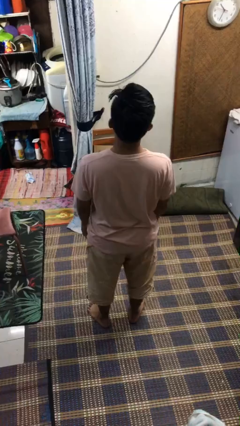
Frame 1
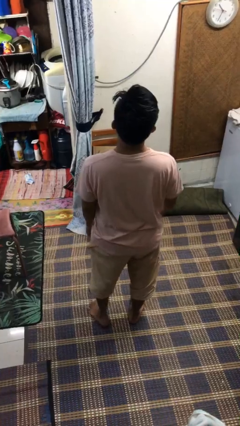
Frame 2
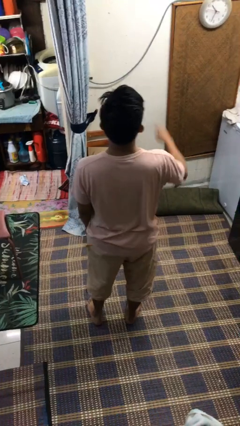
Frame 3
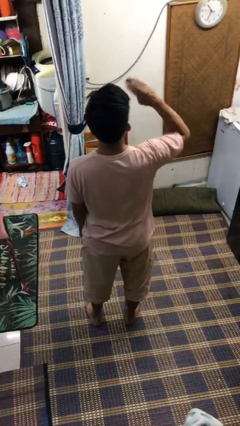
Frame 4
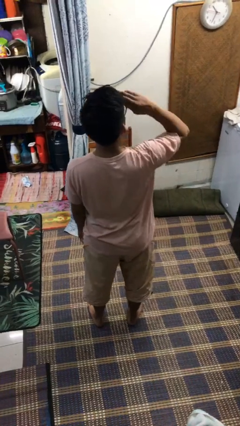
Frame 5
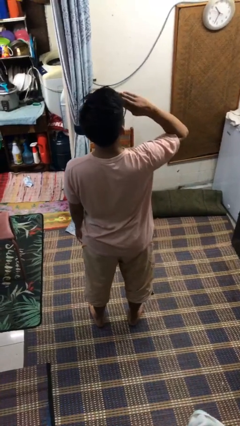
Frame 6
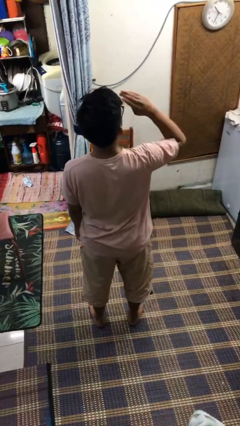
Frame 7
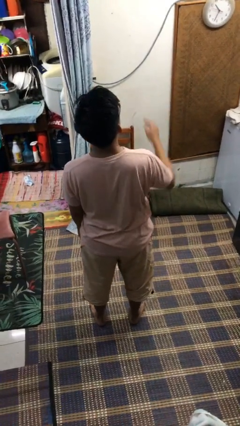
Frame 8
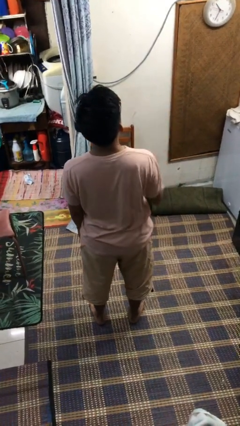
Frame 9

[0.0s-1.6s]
person salutes

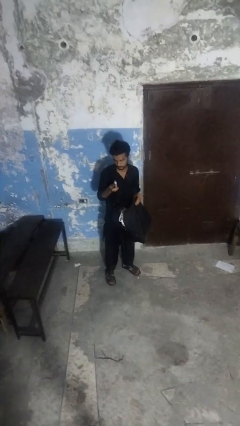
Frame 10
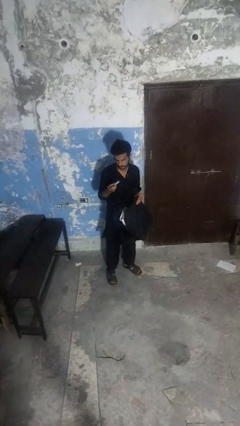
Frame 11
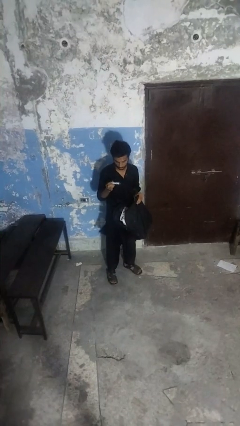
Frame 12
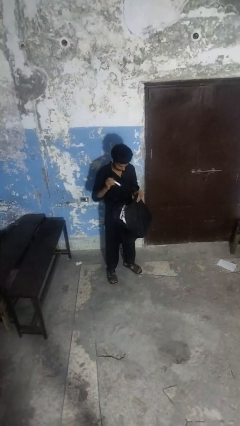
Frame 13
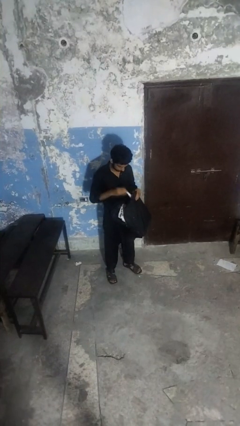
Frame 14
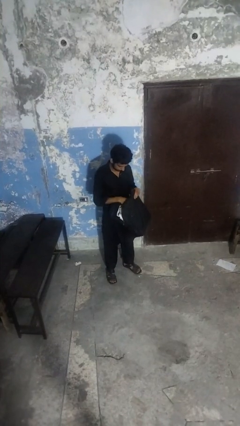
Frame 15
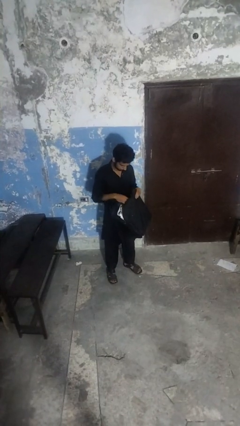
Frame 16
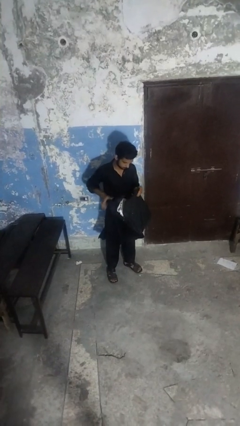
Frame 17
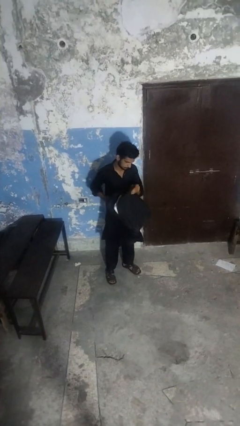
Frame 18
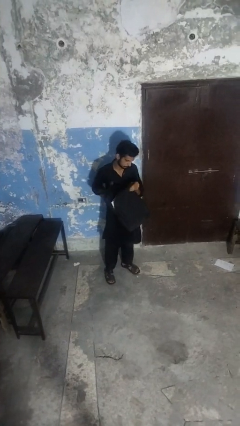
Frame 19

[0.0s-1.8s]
person puts object into backpack

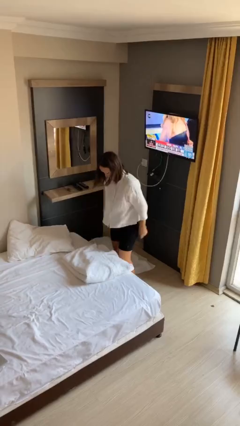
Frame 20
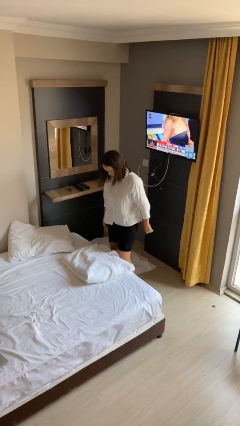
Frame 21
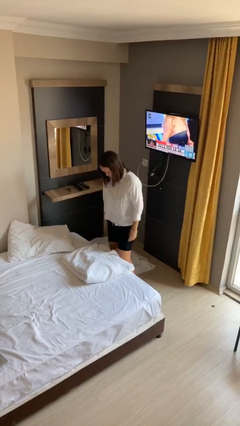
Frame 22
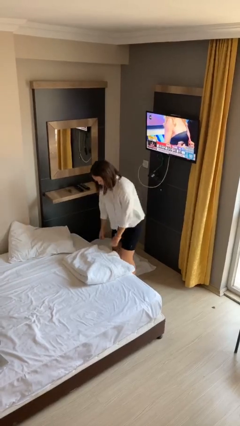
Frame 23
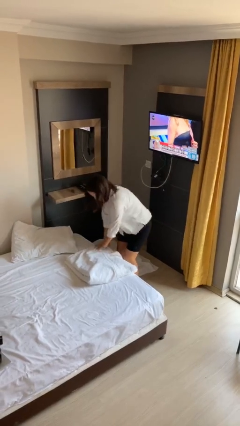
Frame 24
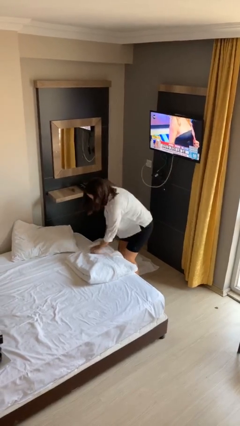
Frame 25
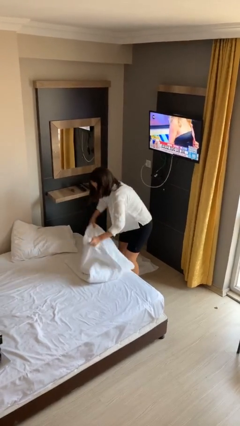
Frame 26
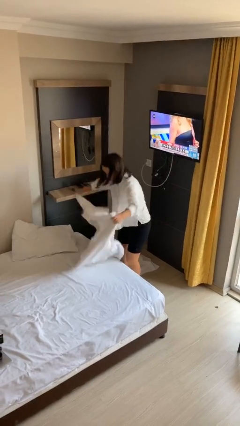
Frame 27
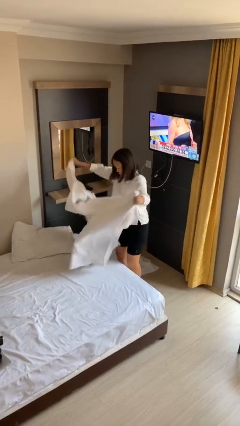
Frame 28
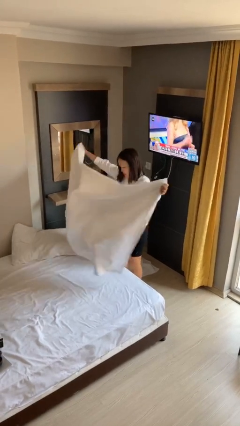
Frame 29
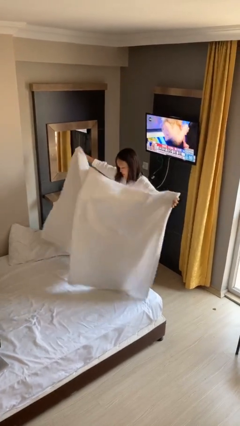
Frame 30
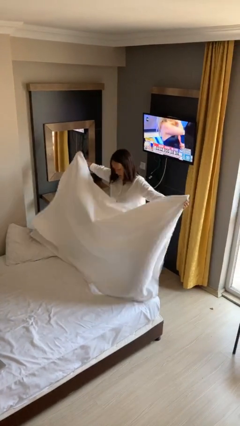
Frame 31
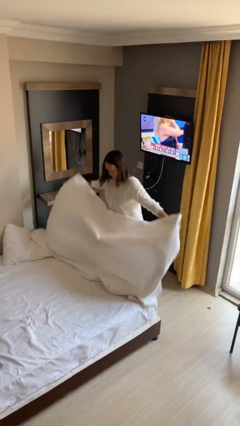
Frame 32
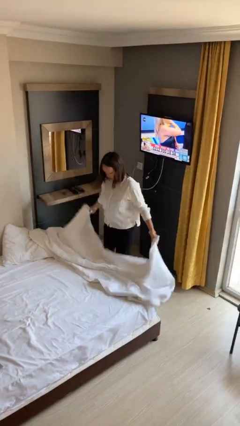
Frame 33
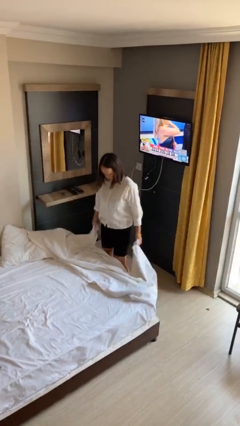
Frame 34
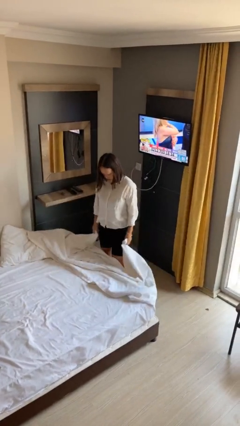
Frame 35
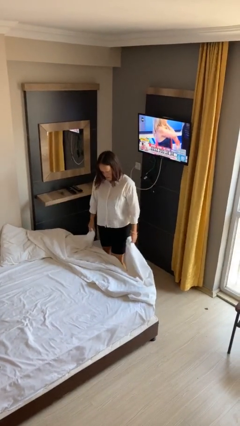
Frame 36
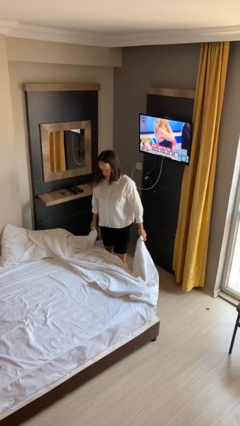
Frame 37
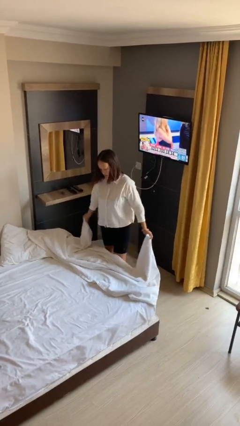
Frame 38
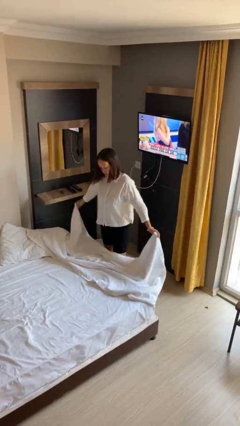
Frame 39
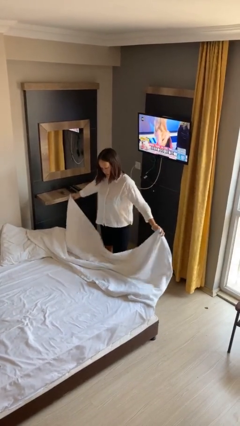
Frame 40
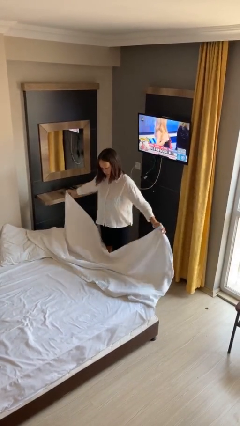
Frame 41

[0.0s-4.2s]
person unfolds blanket

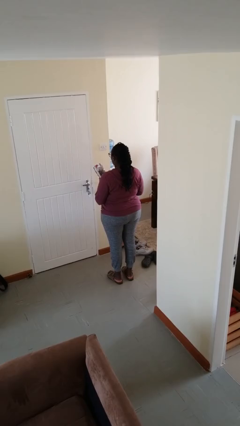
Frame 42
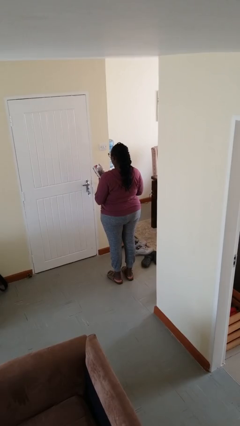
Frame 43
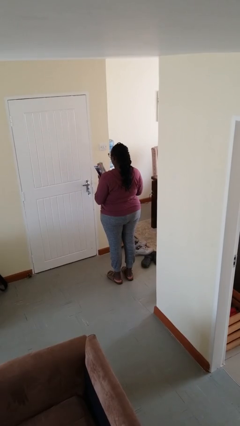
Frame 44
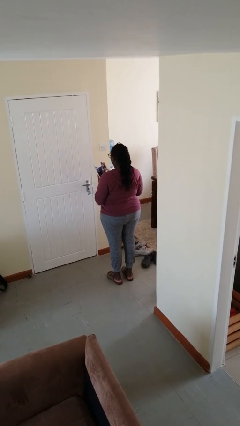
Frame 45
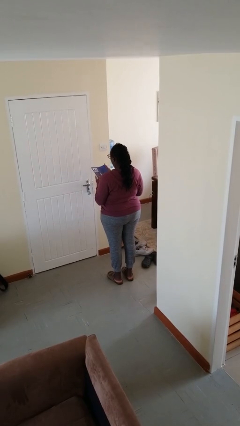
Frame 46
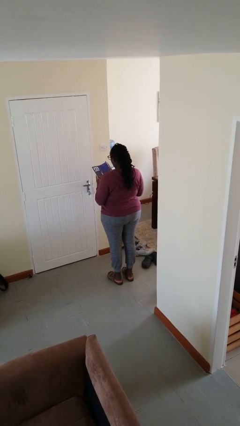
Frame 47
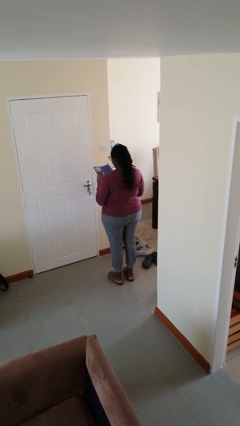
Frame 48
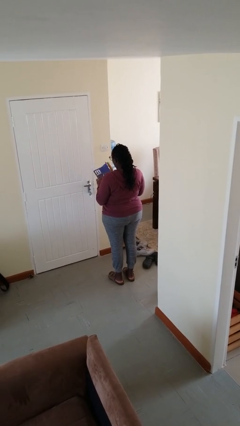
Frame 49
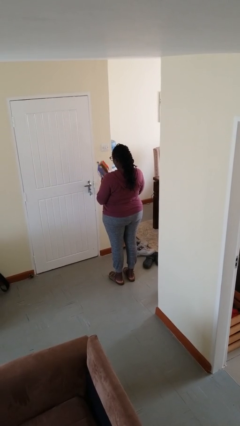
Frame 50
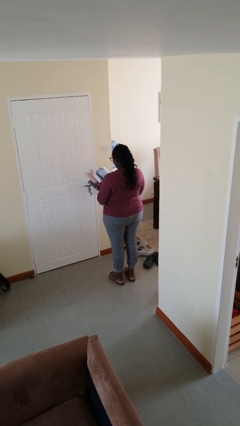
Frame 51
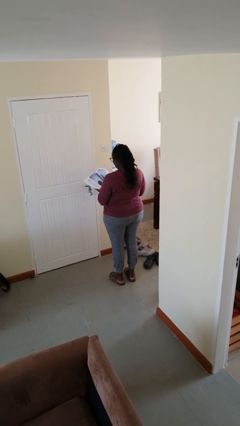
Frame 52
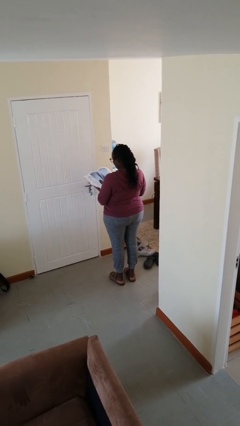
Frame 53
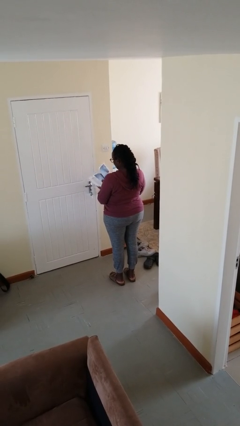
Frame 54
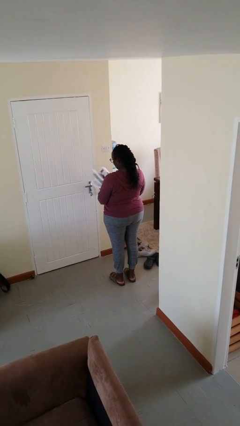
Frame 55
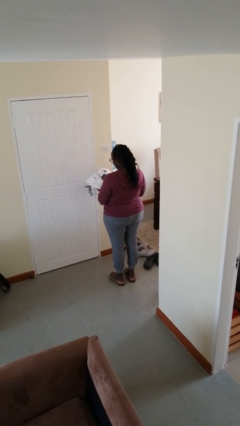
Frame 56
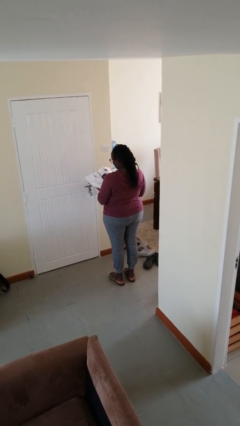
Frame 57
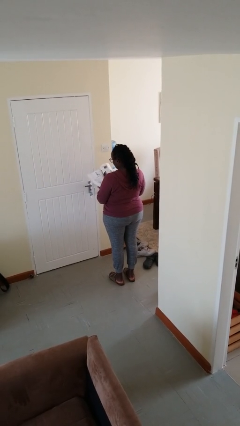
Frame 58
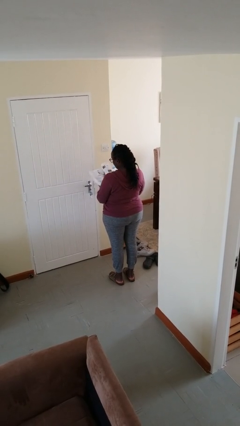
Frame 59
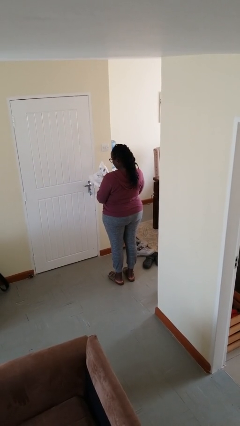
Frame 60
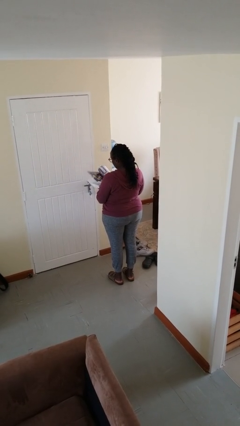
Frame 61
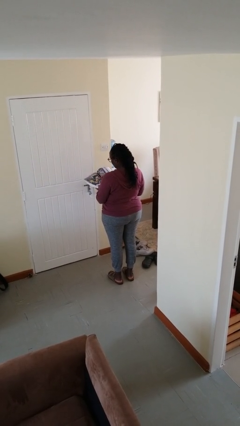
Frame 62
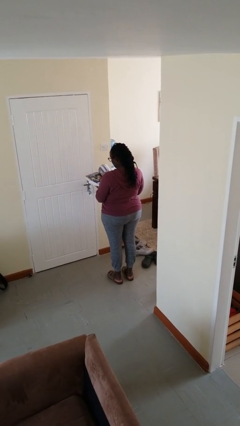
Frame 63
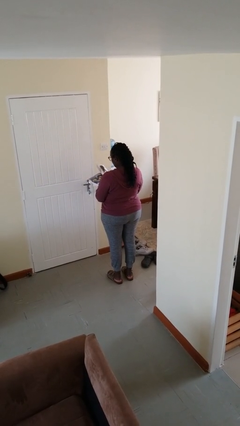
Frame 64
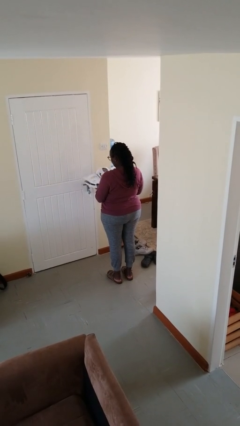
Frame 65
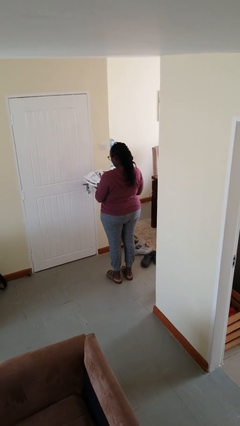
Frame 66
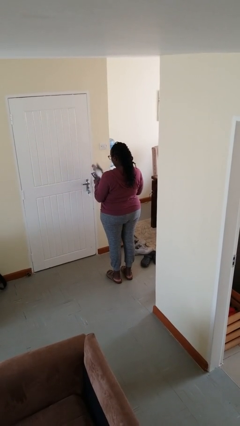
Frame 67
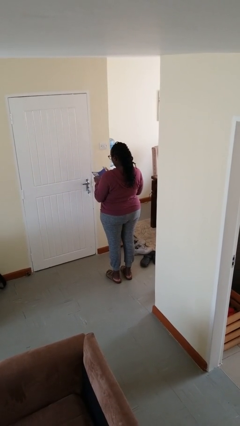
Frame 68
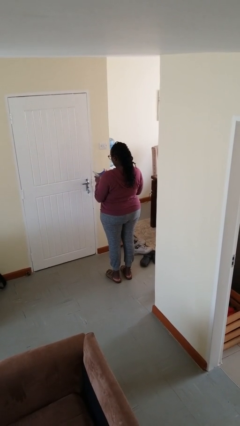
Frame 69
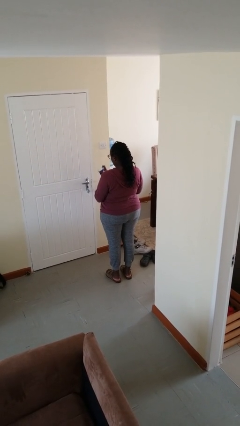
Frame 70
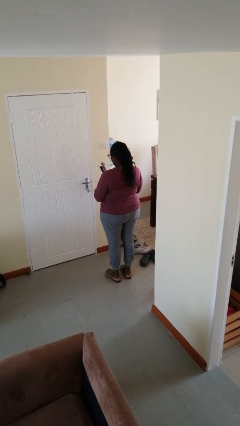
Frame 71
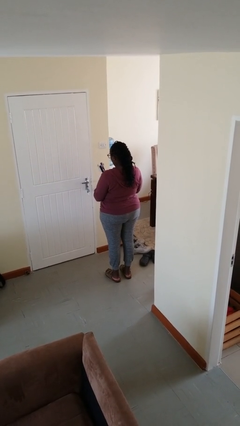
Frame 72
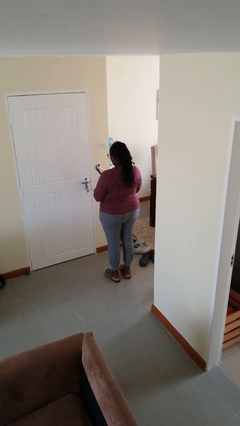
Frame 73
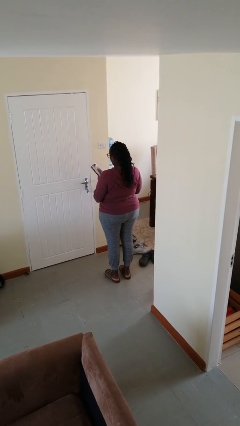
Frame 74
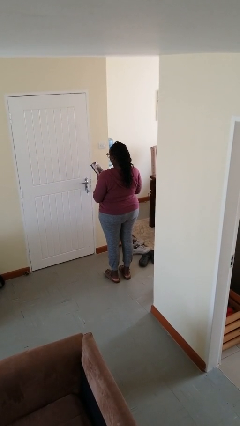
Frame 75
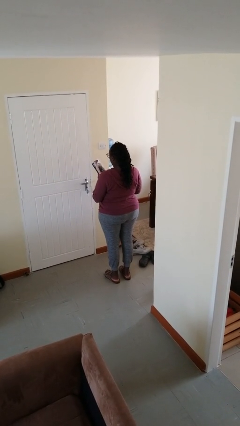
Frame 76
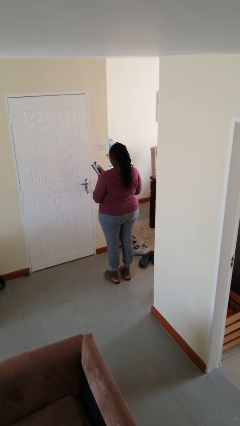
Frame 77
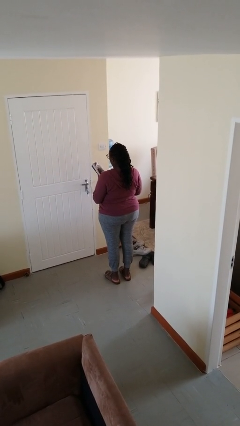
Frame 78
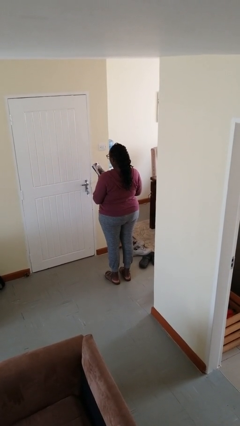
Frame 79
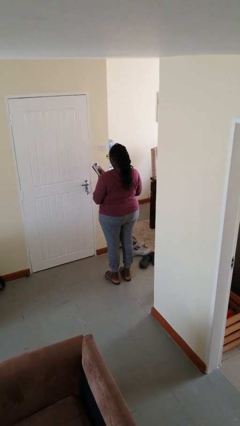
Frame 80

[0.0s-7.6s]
person reads magazine

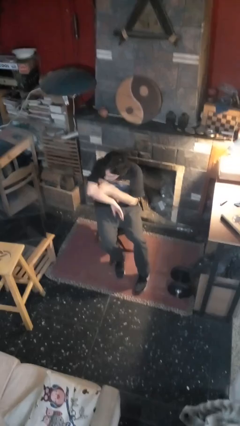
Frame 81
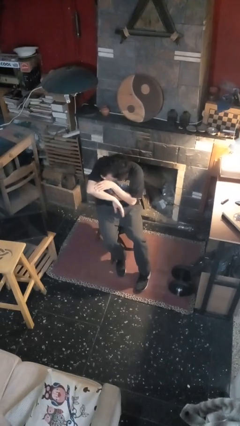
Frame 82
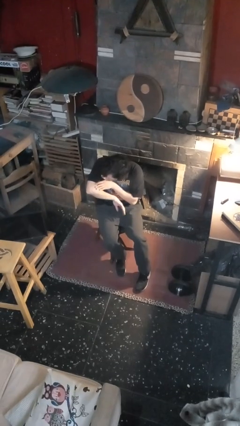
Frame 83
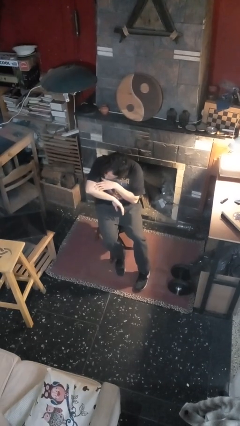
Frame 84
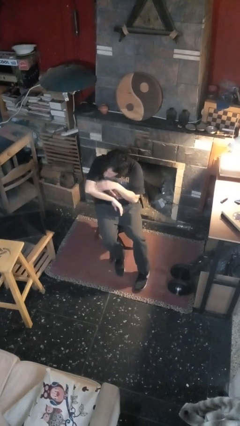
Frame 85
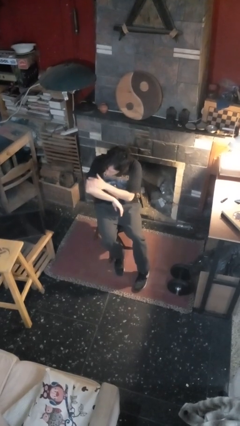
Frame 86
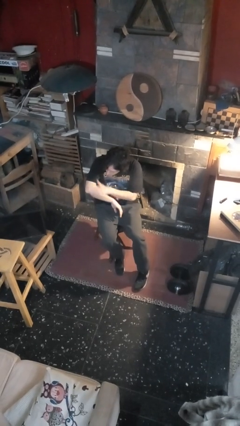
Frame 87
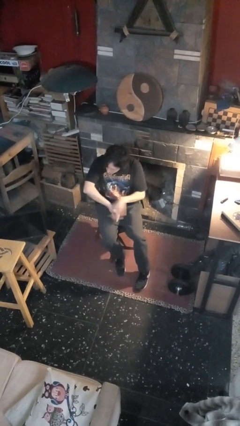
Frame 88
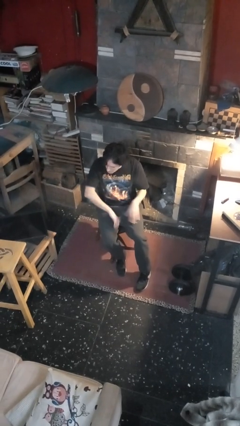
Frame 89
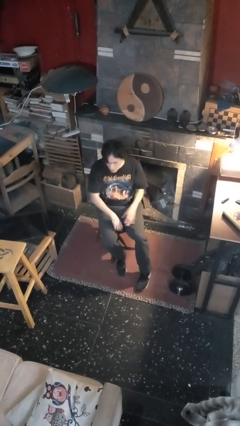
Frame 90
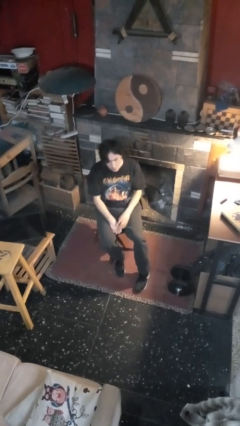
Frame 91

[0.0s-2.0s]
person swats bug

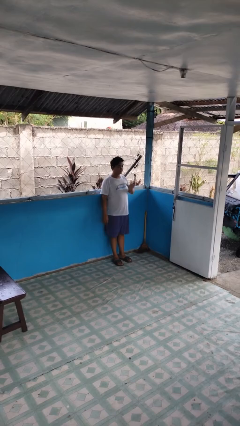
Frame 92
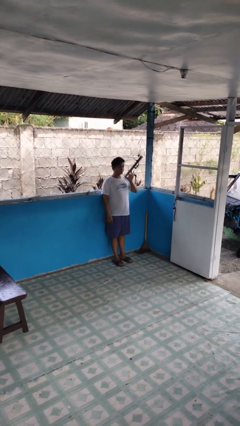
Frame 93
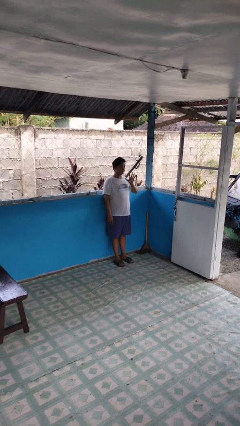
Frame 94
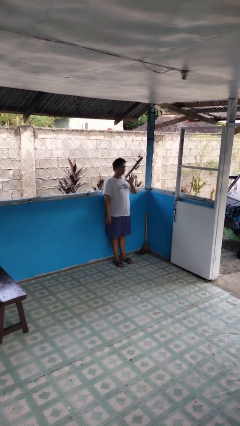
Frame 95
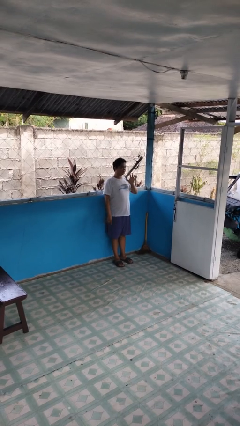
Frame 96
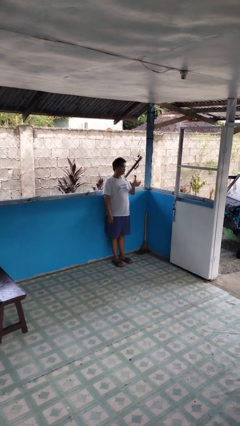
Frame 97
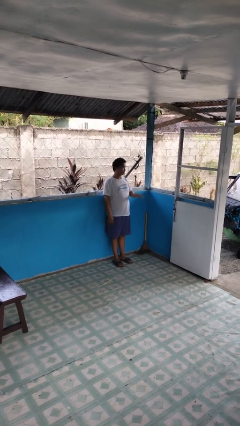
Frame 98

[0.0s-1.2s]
person gestures number five
